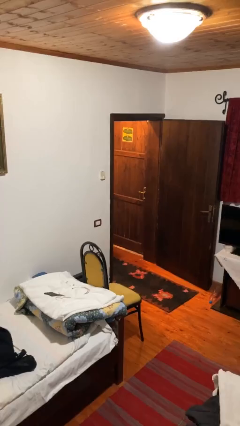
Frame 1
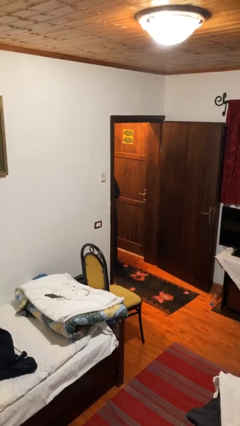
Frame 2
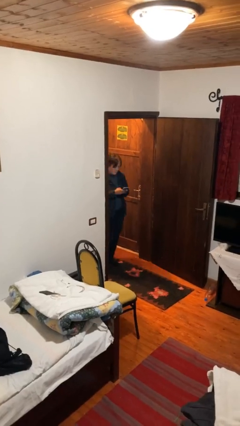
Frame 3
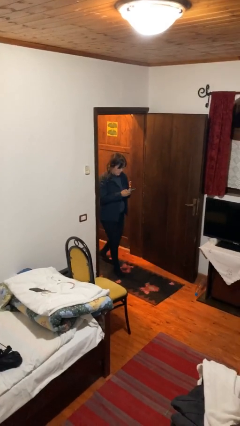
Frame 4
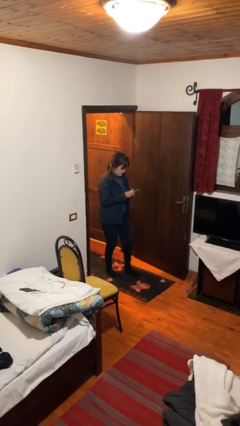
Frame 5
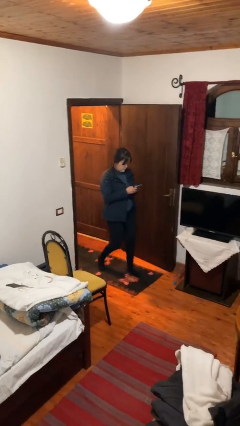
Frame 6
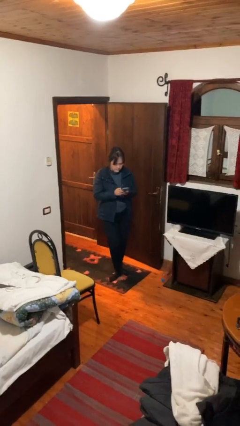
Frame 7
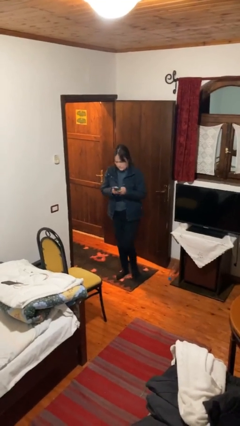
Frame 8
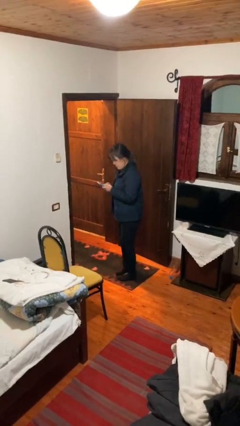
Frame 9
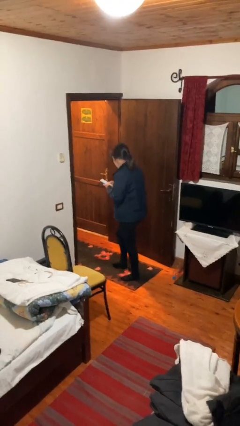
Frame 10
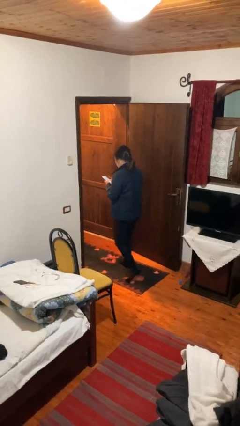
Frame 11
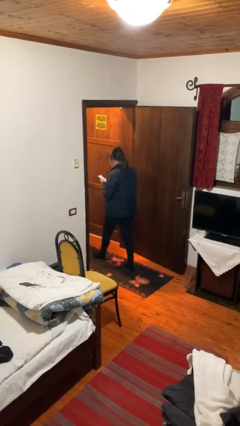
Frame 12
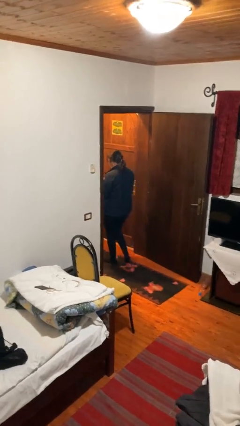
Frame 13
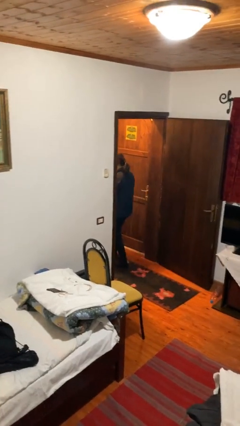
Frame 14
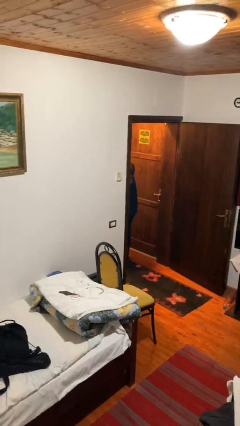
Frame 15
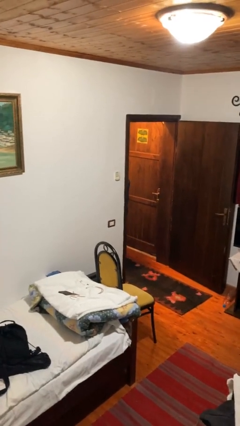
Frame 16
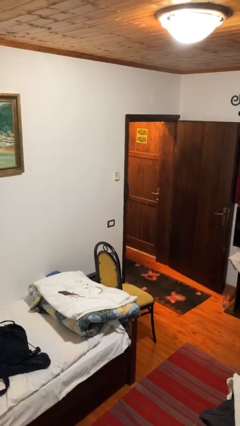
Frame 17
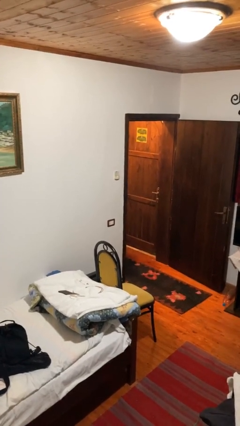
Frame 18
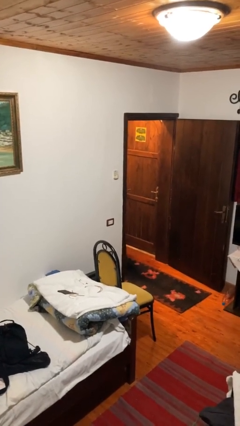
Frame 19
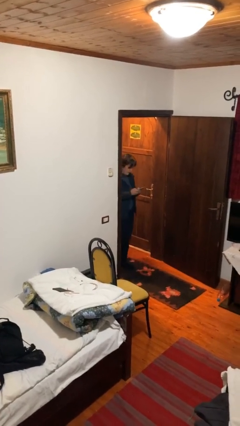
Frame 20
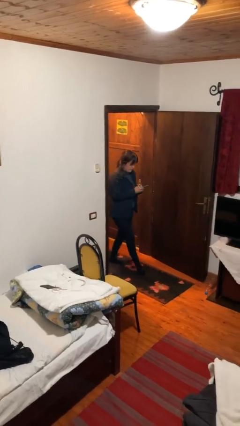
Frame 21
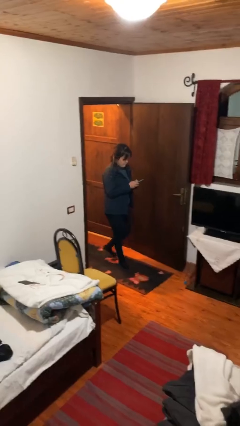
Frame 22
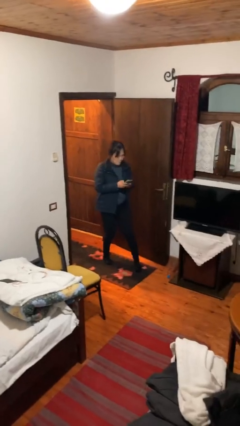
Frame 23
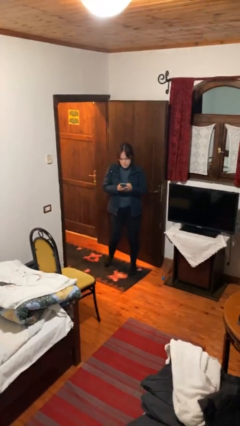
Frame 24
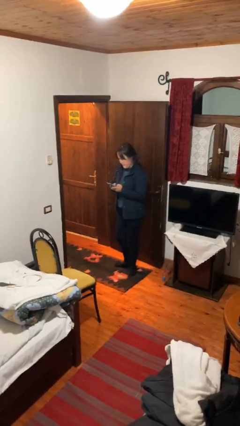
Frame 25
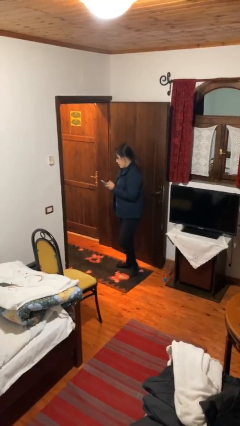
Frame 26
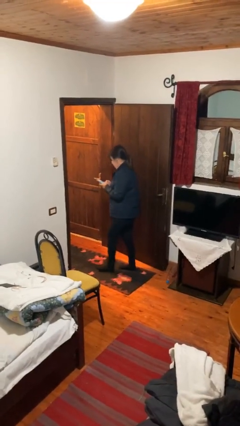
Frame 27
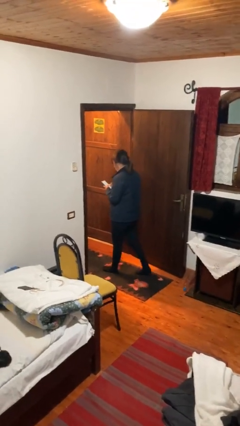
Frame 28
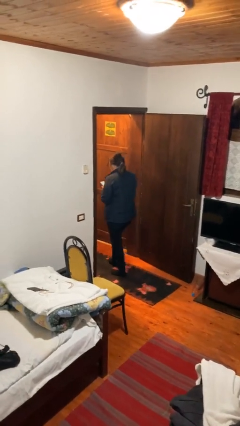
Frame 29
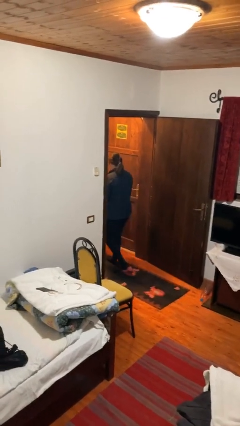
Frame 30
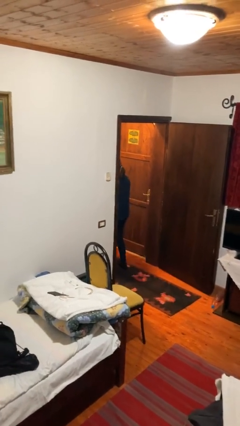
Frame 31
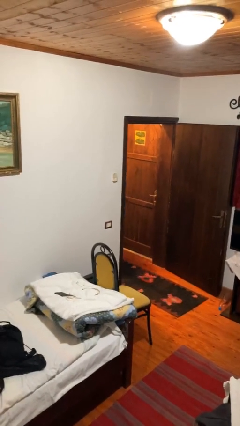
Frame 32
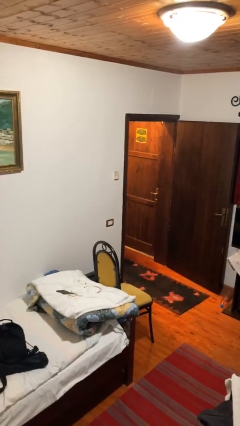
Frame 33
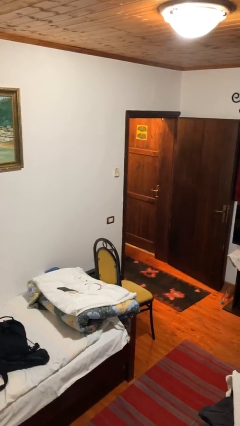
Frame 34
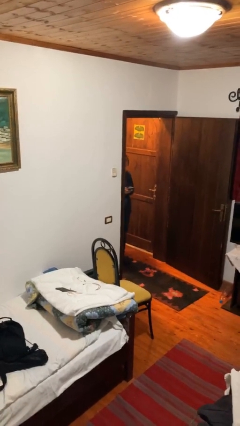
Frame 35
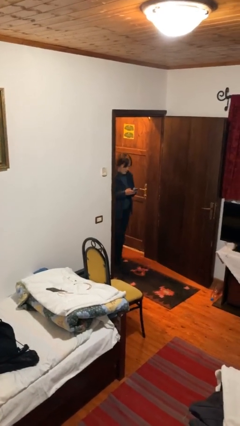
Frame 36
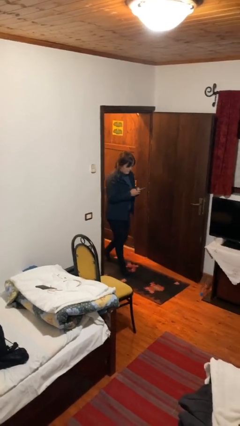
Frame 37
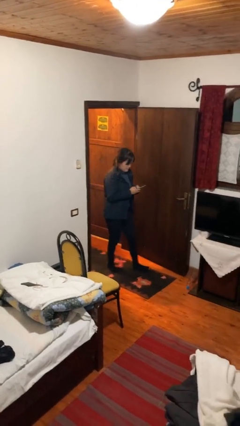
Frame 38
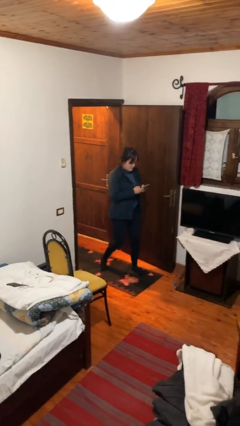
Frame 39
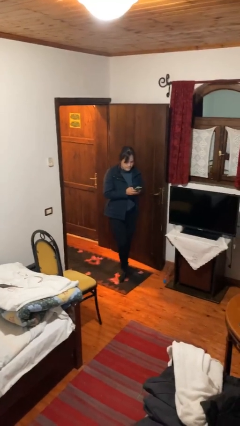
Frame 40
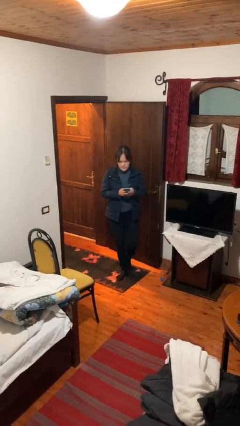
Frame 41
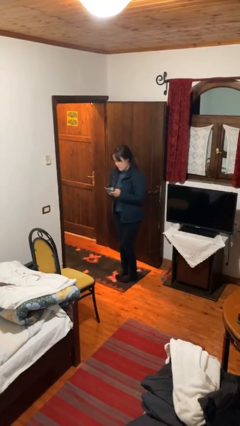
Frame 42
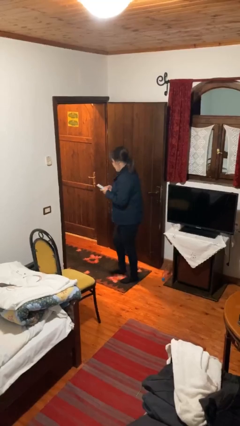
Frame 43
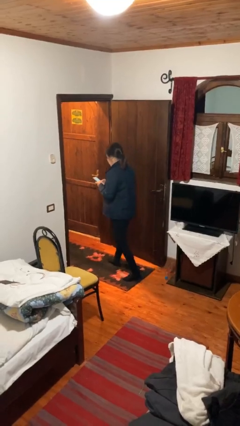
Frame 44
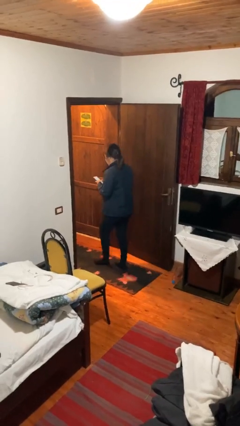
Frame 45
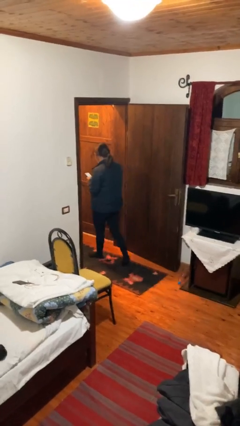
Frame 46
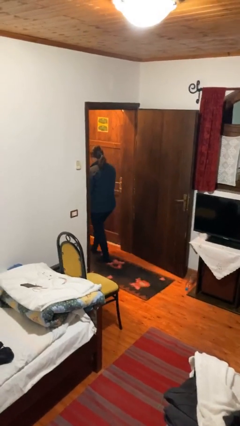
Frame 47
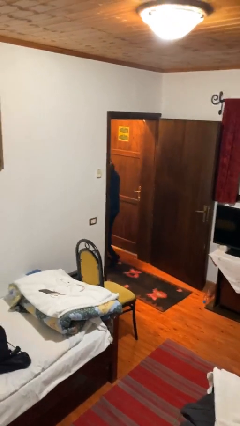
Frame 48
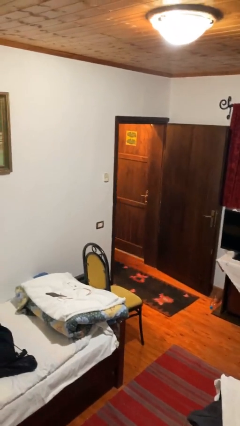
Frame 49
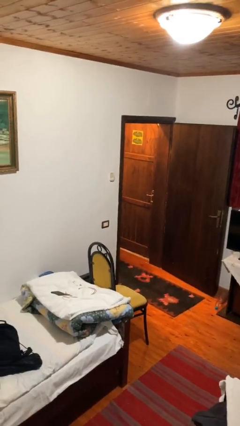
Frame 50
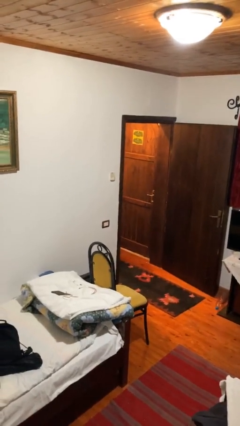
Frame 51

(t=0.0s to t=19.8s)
person texts on phone

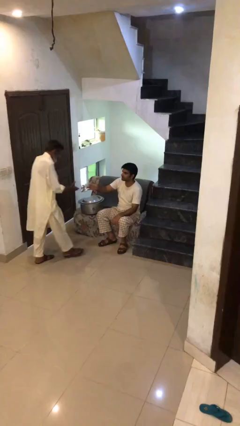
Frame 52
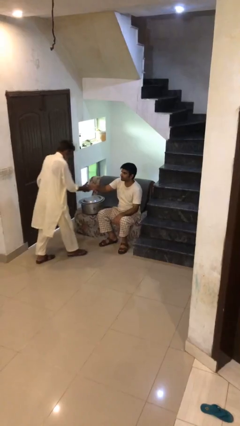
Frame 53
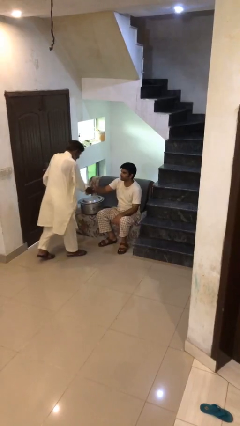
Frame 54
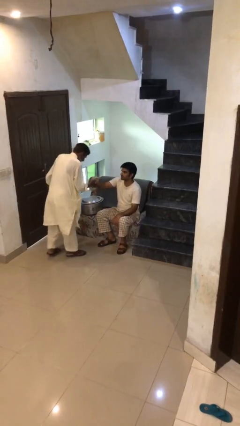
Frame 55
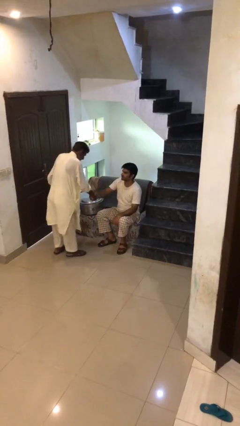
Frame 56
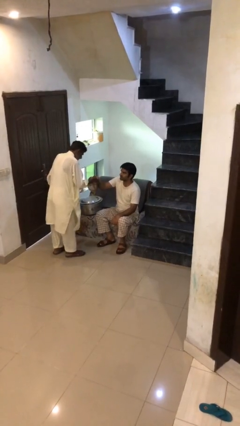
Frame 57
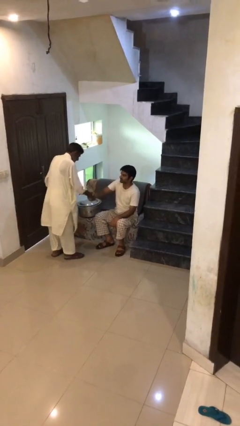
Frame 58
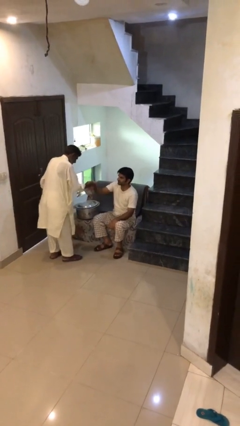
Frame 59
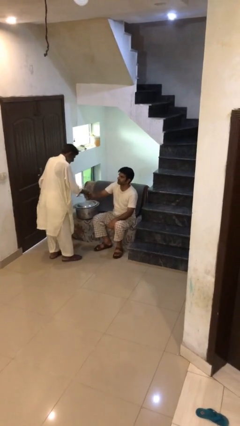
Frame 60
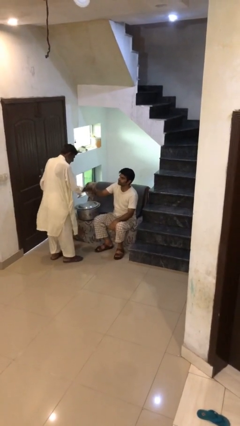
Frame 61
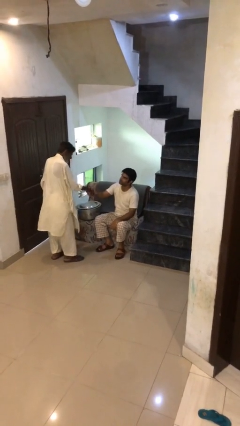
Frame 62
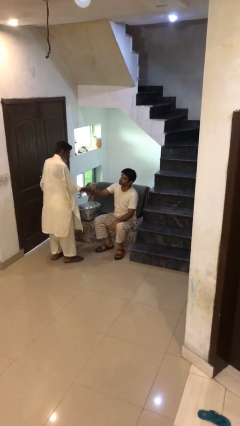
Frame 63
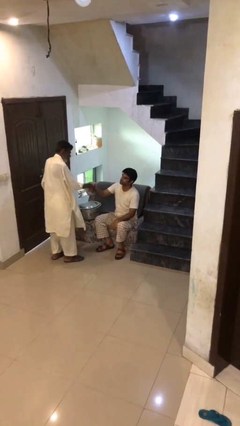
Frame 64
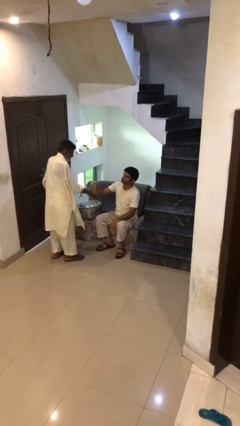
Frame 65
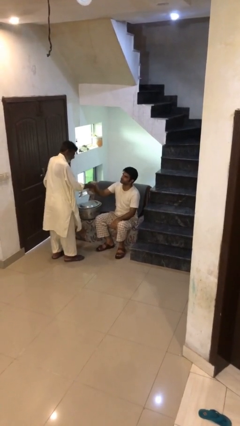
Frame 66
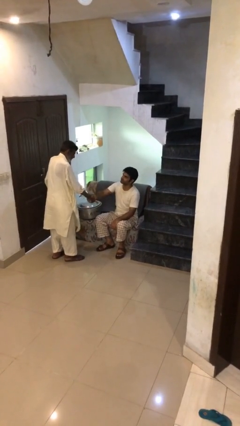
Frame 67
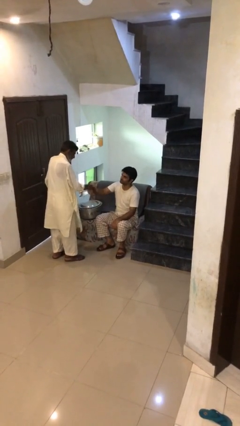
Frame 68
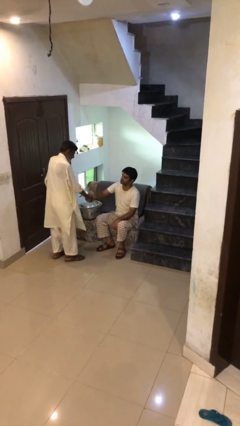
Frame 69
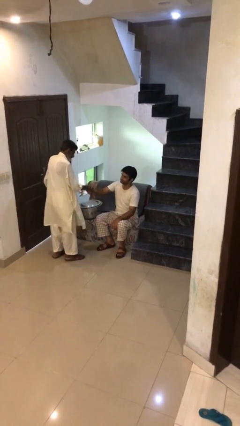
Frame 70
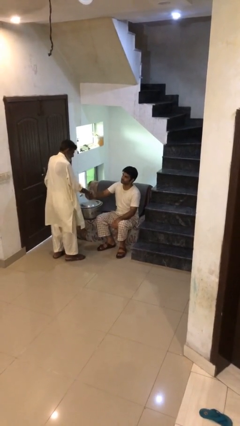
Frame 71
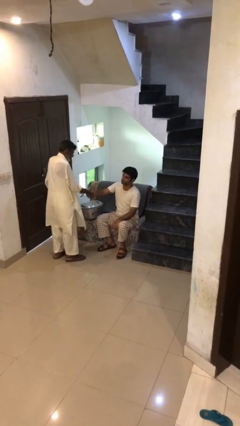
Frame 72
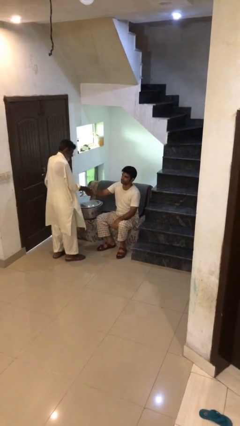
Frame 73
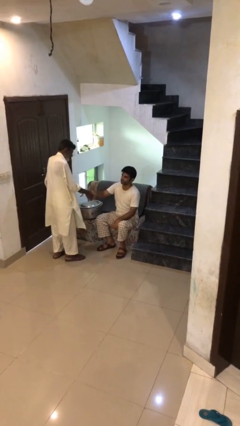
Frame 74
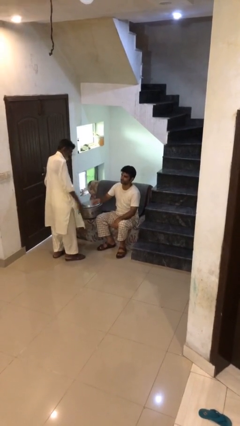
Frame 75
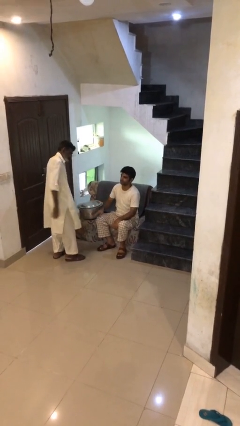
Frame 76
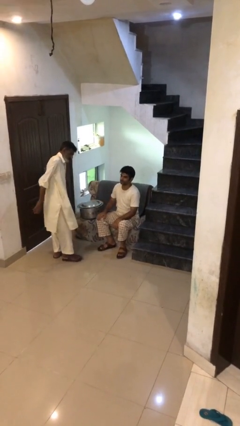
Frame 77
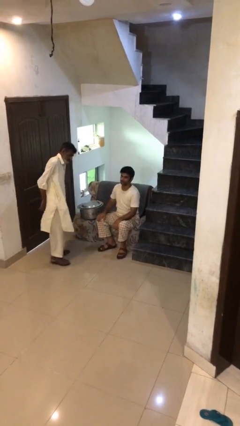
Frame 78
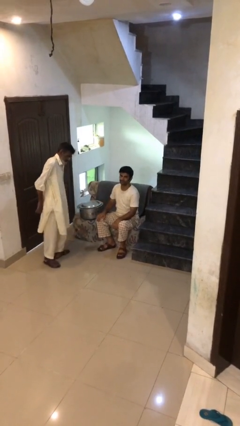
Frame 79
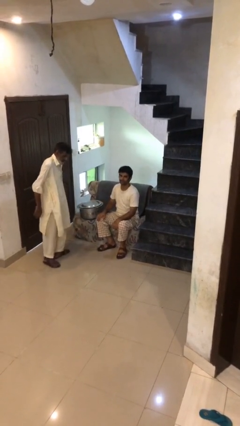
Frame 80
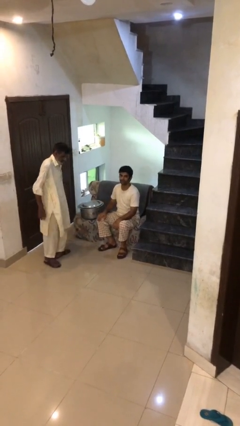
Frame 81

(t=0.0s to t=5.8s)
person shakes hand

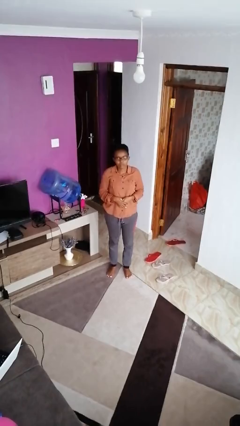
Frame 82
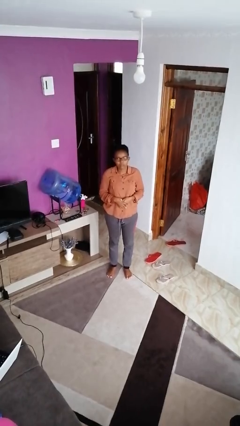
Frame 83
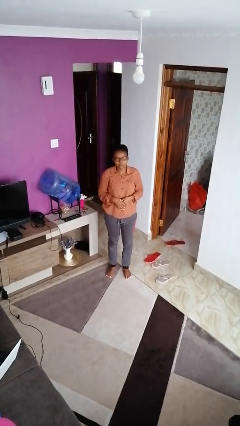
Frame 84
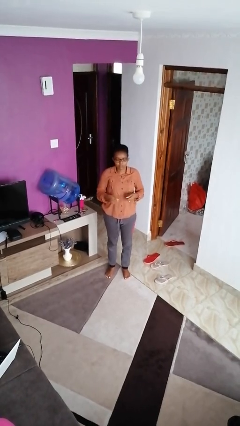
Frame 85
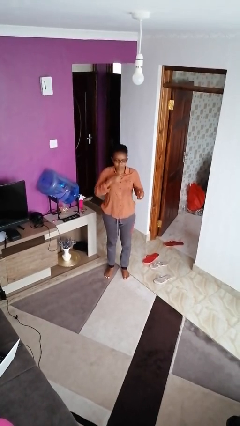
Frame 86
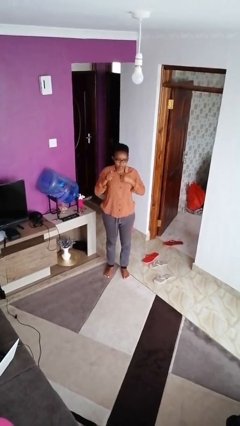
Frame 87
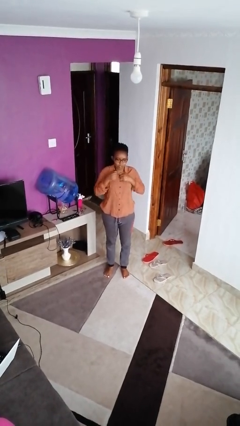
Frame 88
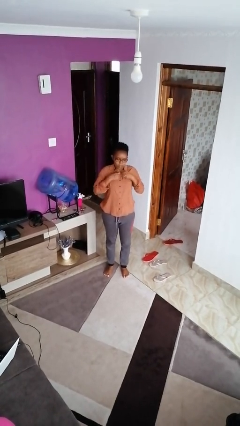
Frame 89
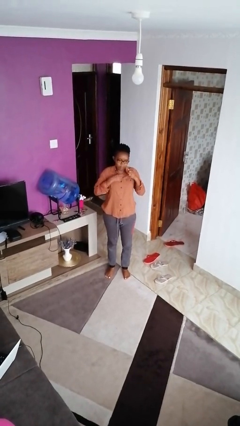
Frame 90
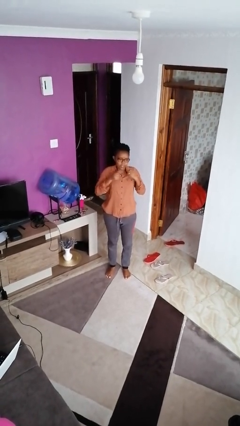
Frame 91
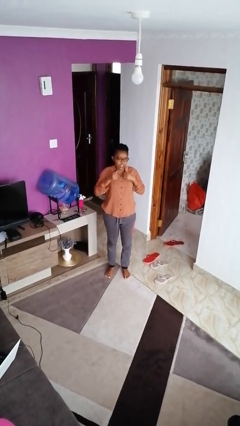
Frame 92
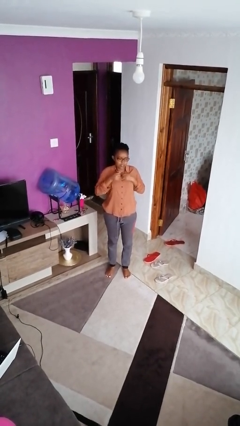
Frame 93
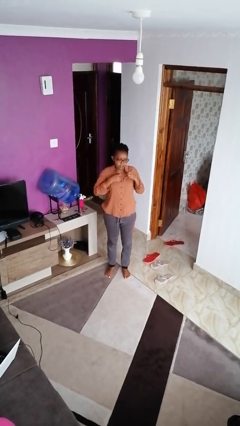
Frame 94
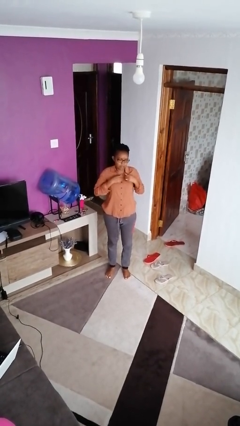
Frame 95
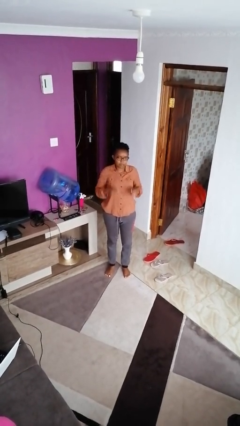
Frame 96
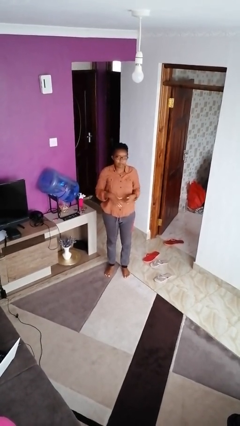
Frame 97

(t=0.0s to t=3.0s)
person drums on chest
